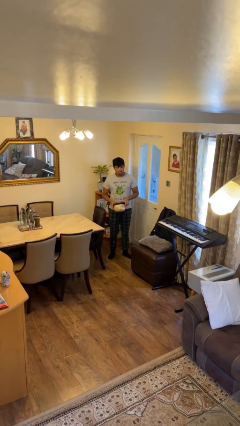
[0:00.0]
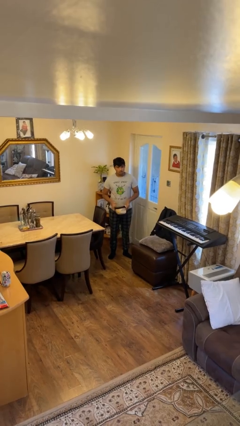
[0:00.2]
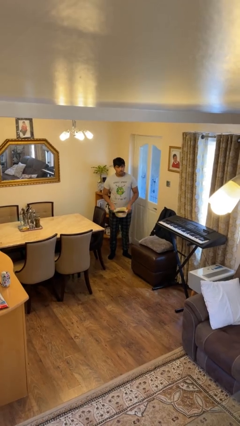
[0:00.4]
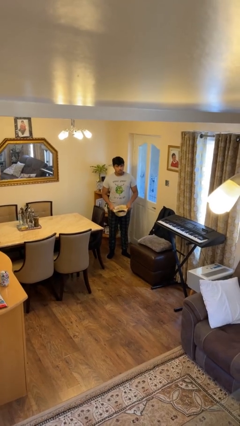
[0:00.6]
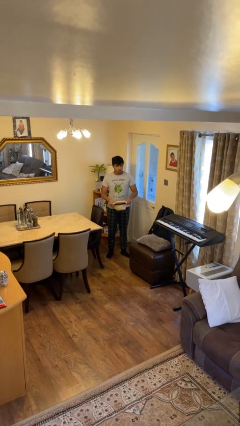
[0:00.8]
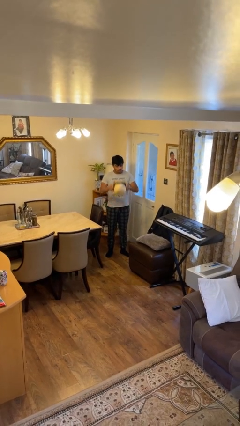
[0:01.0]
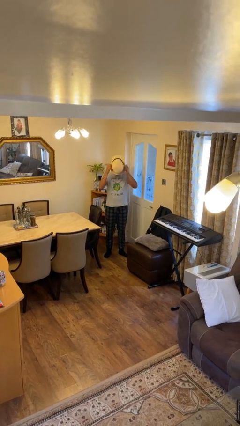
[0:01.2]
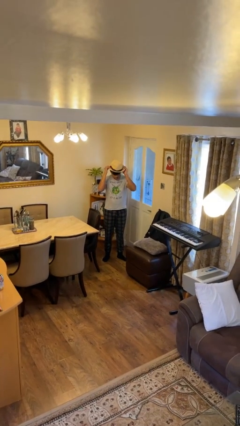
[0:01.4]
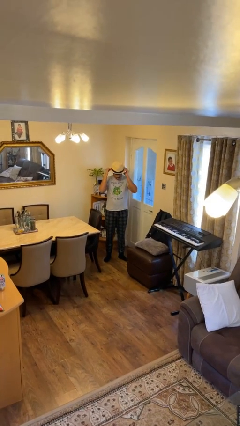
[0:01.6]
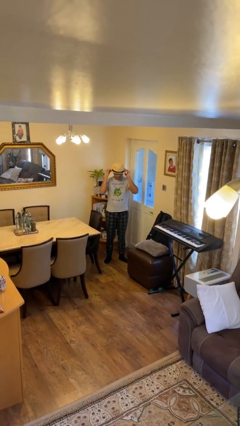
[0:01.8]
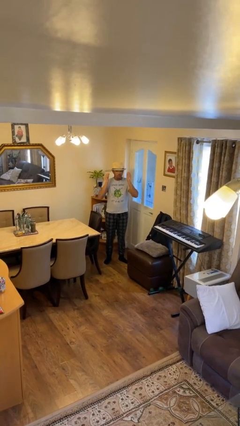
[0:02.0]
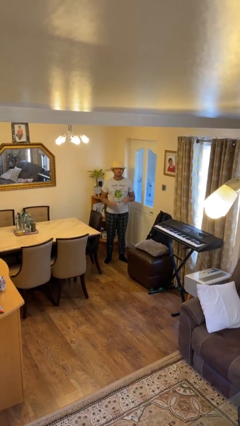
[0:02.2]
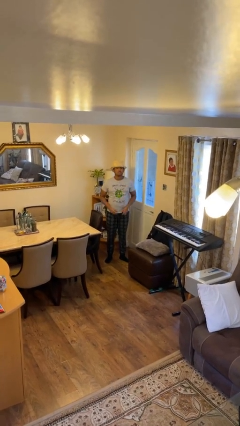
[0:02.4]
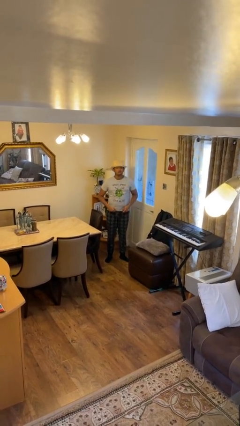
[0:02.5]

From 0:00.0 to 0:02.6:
person puts on hat

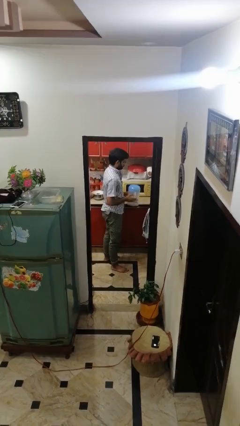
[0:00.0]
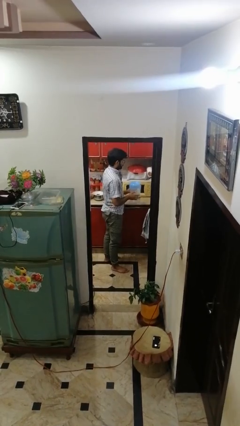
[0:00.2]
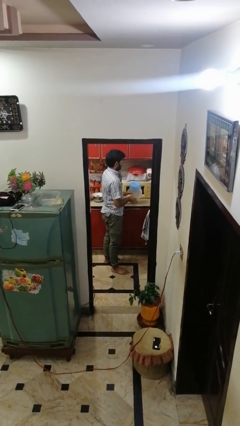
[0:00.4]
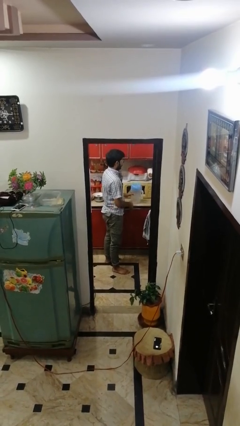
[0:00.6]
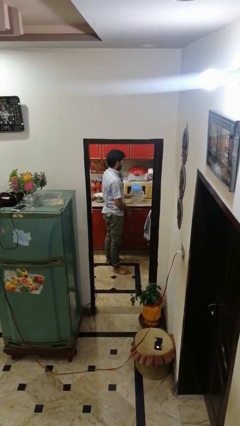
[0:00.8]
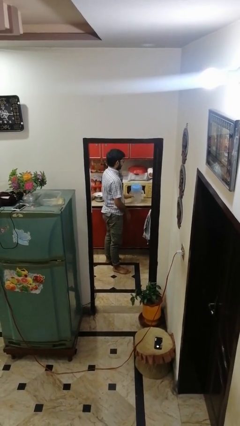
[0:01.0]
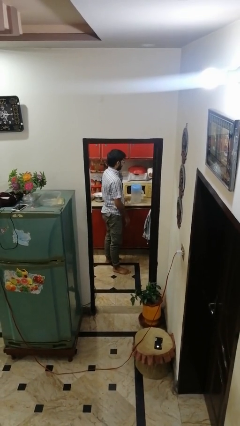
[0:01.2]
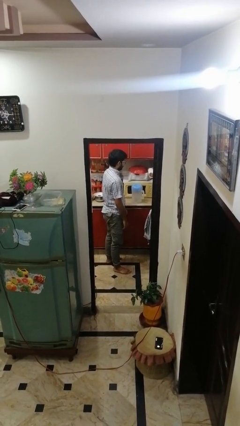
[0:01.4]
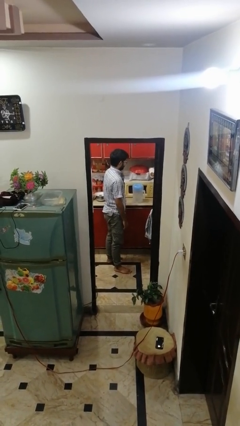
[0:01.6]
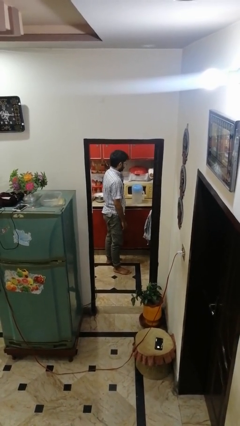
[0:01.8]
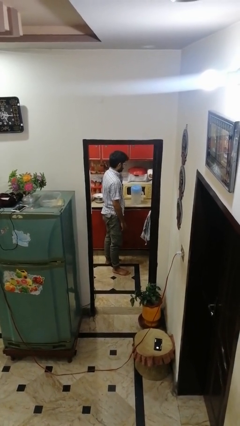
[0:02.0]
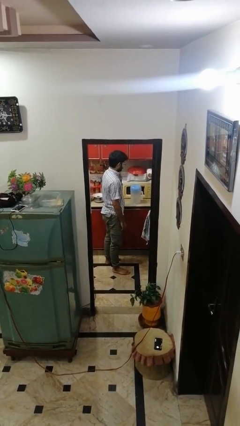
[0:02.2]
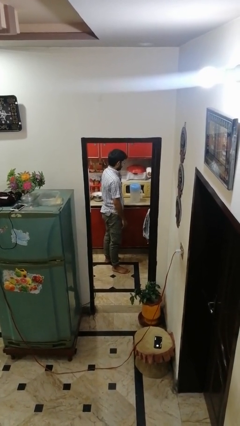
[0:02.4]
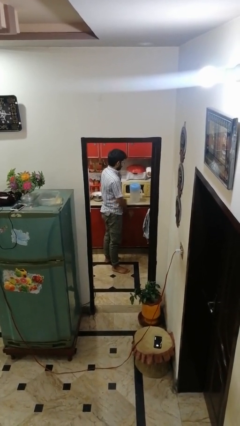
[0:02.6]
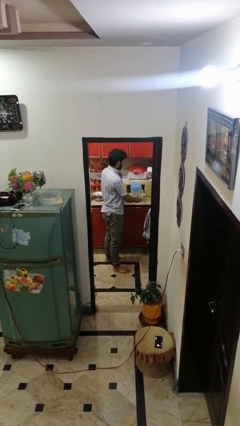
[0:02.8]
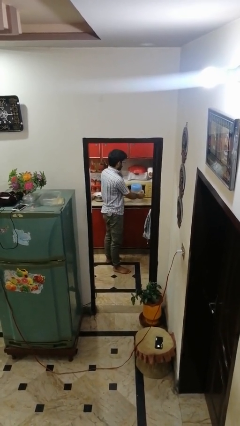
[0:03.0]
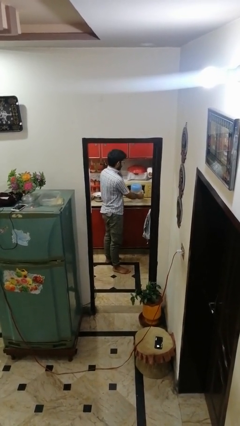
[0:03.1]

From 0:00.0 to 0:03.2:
person puts down object on countertop

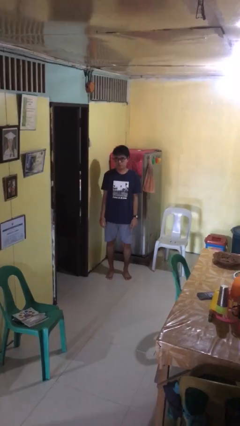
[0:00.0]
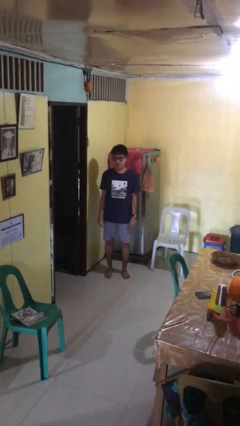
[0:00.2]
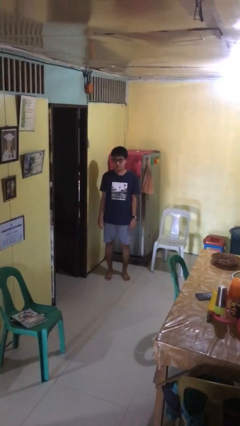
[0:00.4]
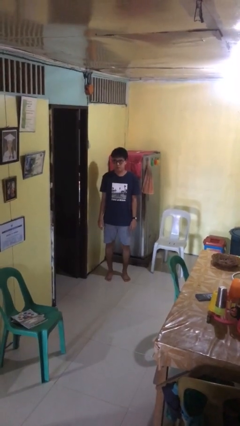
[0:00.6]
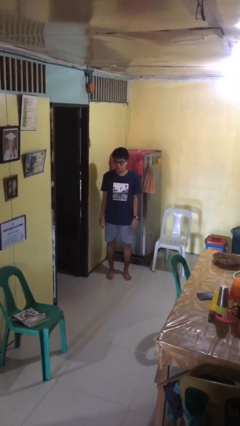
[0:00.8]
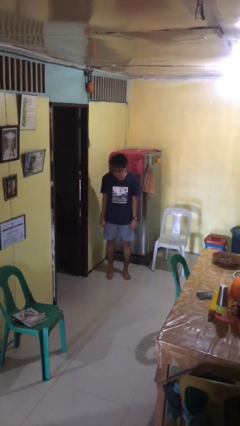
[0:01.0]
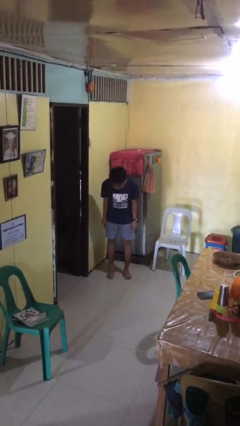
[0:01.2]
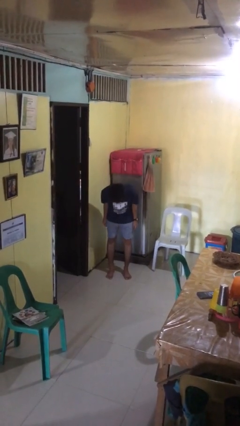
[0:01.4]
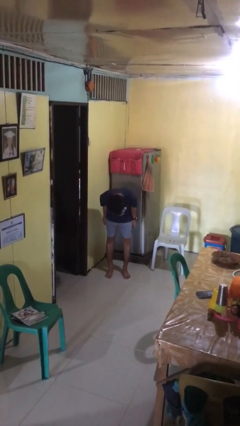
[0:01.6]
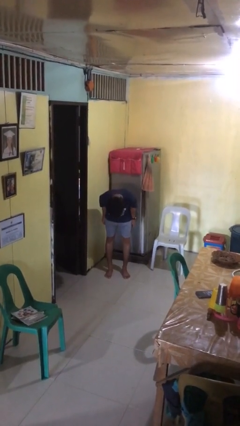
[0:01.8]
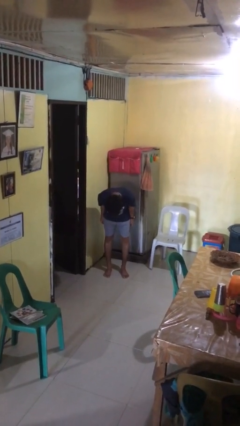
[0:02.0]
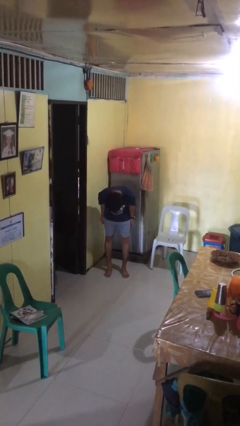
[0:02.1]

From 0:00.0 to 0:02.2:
person bows

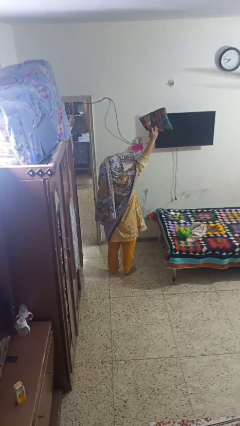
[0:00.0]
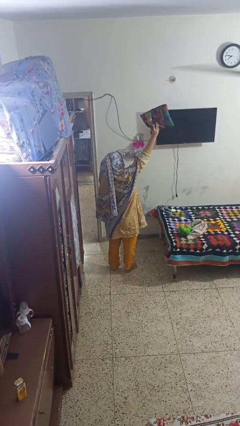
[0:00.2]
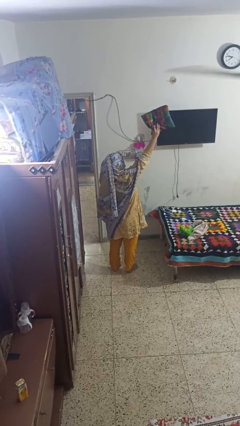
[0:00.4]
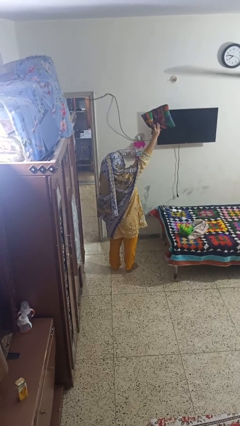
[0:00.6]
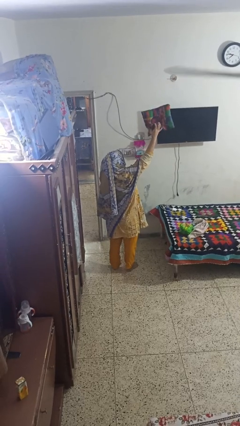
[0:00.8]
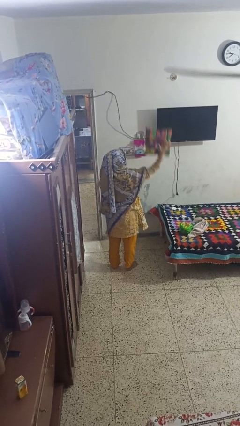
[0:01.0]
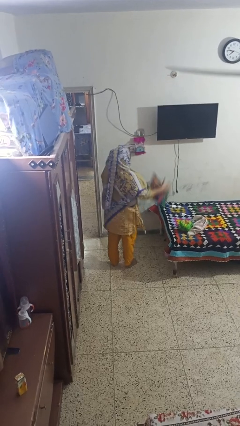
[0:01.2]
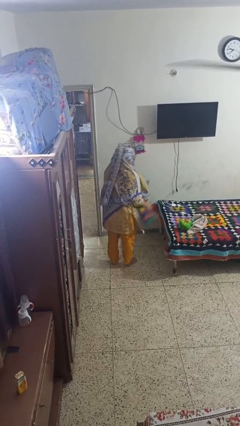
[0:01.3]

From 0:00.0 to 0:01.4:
person drops object

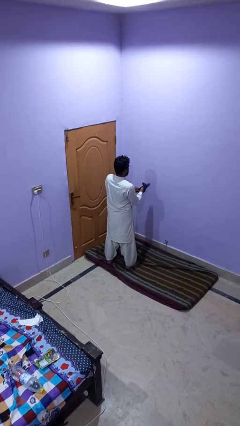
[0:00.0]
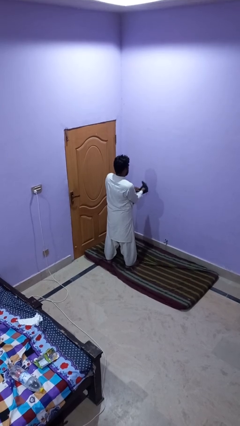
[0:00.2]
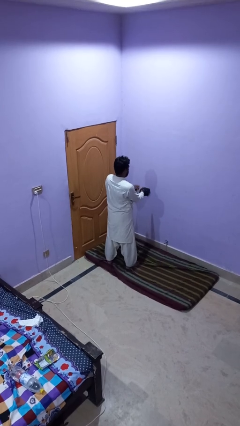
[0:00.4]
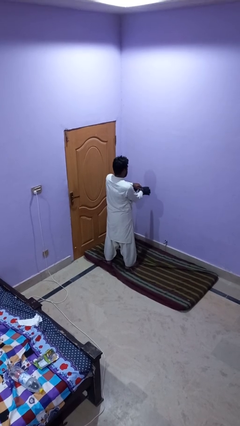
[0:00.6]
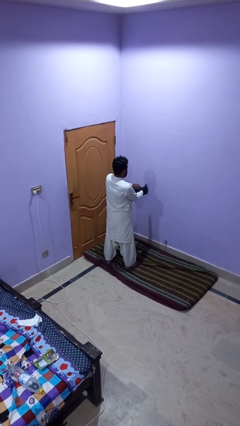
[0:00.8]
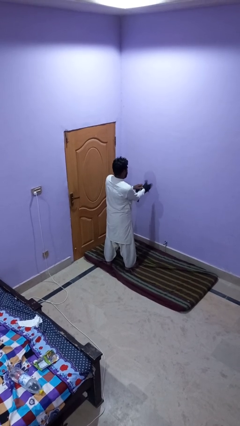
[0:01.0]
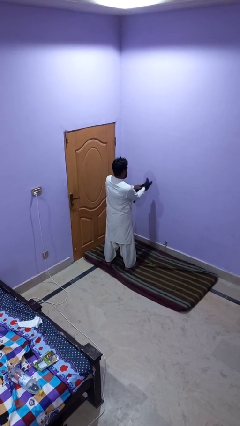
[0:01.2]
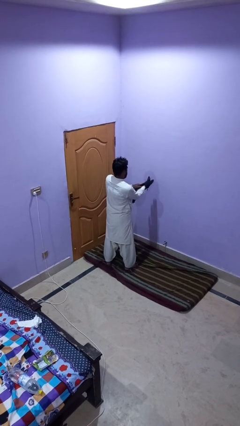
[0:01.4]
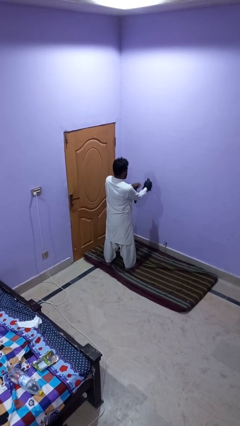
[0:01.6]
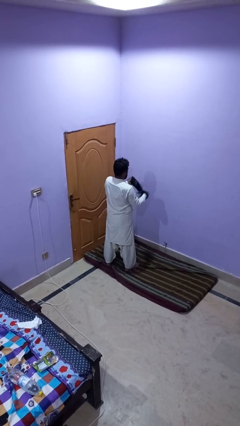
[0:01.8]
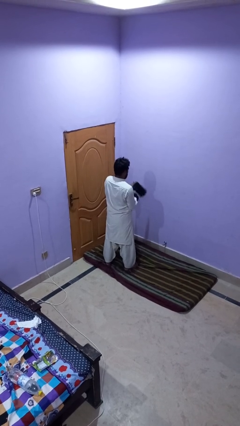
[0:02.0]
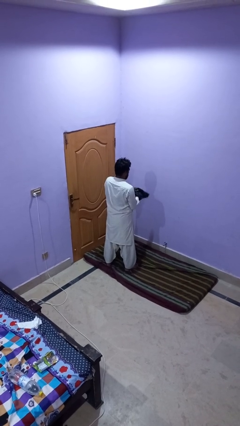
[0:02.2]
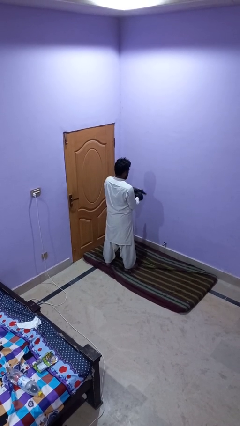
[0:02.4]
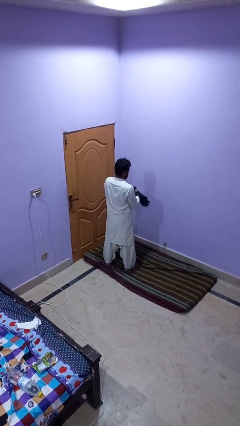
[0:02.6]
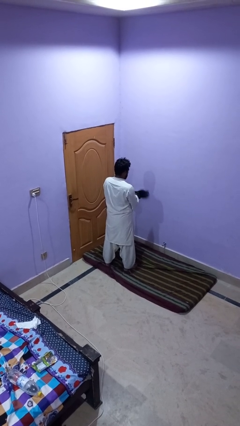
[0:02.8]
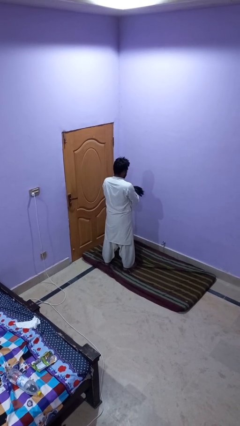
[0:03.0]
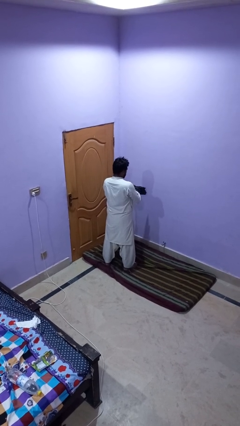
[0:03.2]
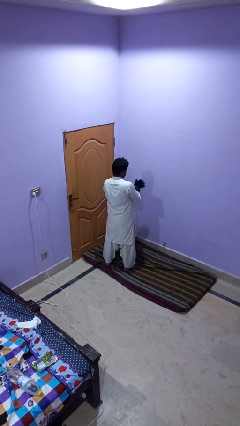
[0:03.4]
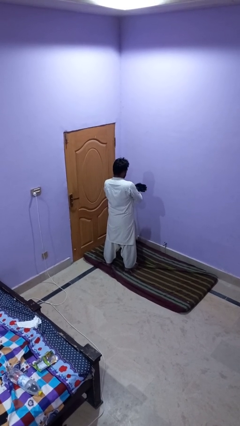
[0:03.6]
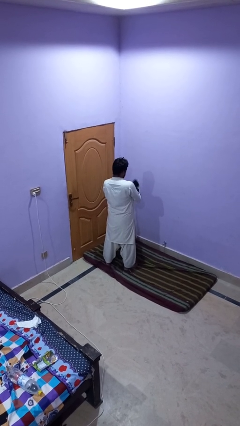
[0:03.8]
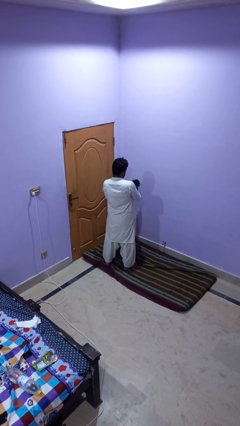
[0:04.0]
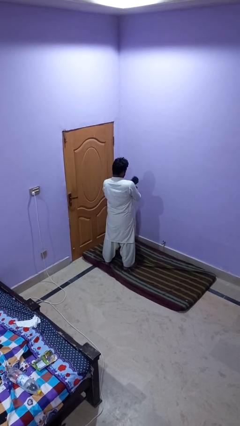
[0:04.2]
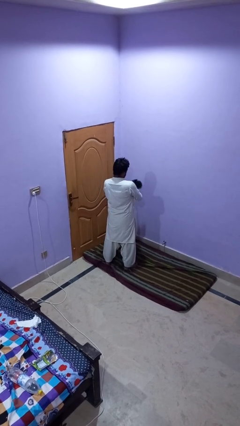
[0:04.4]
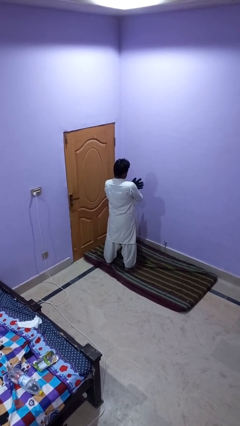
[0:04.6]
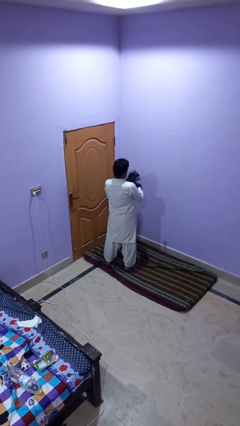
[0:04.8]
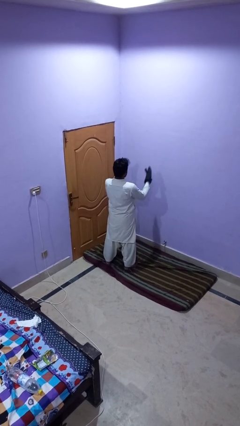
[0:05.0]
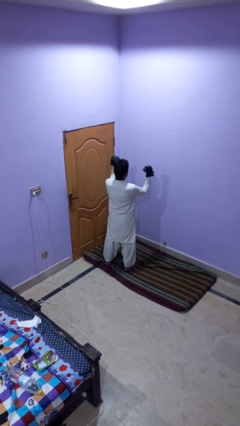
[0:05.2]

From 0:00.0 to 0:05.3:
person puts on gloves

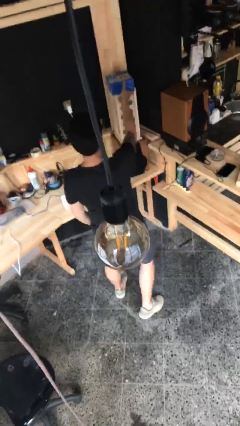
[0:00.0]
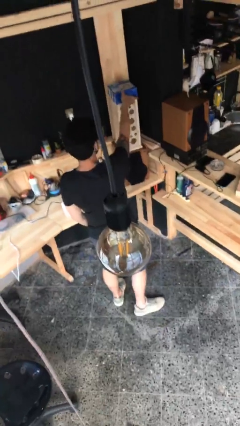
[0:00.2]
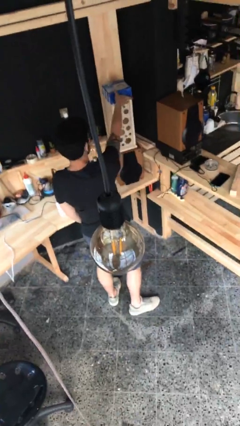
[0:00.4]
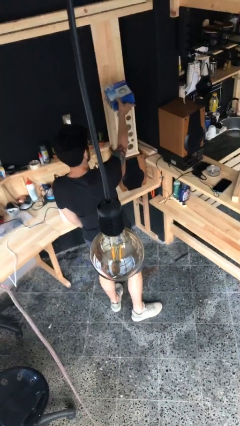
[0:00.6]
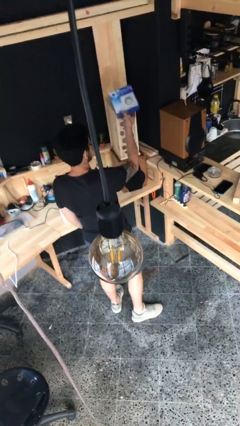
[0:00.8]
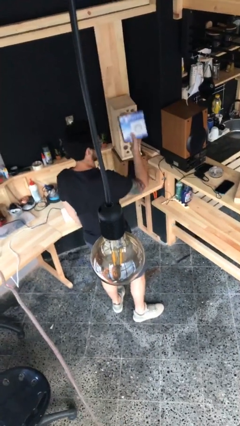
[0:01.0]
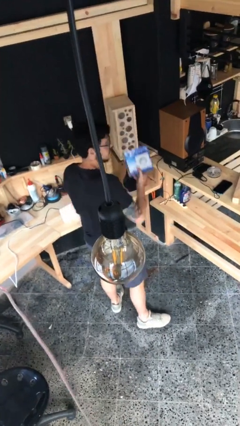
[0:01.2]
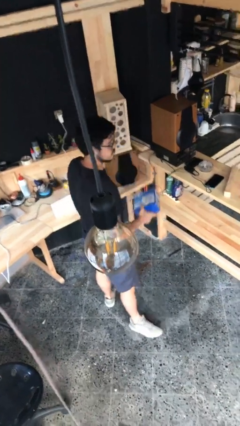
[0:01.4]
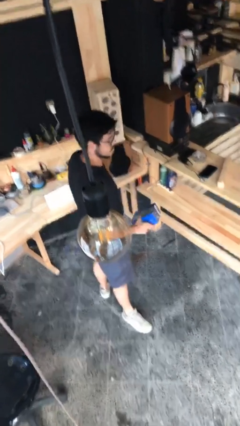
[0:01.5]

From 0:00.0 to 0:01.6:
person picks up object from shelf

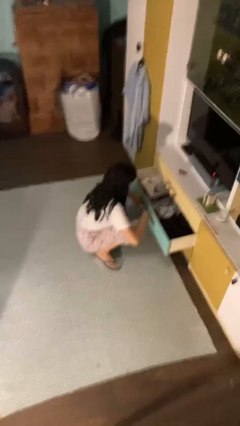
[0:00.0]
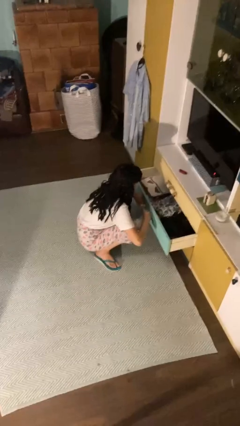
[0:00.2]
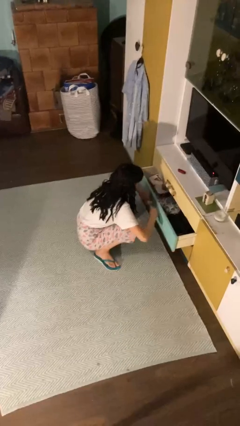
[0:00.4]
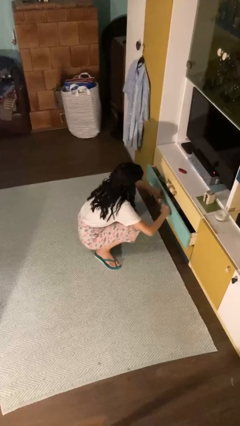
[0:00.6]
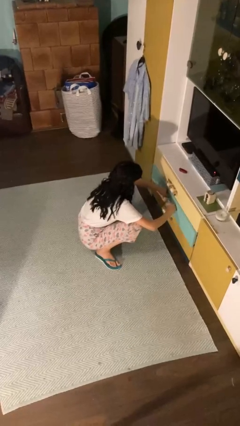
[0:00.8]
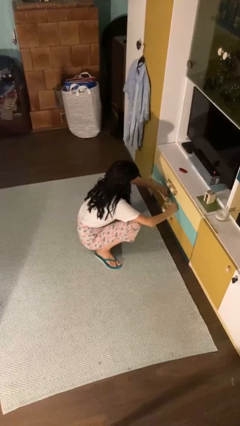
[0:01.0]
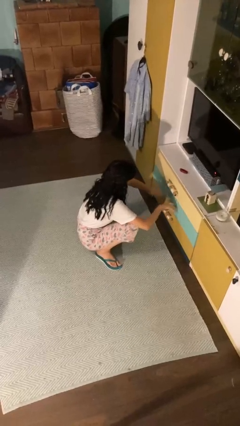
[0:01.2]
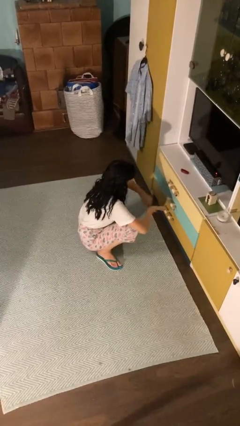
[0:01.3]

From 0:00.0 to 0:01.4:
person closes dresser drawer
